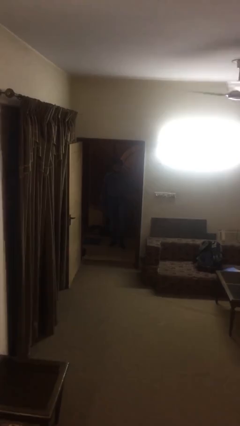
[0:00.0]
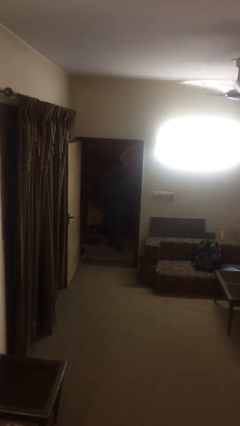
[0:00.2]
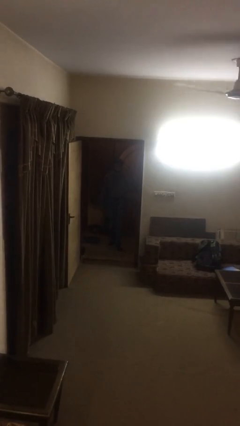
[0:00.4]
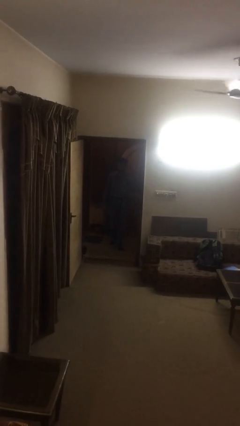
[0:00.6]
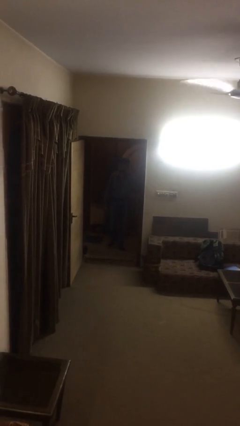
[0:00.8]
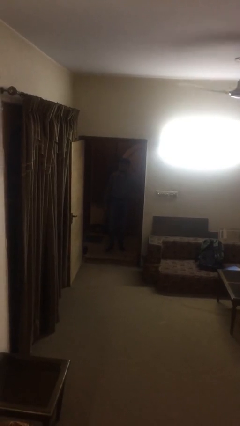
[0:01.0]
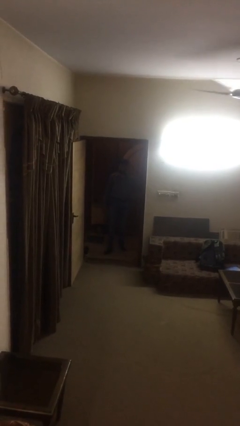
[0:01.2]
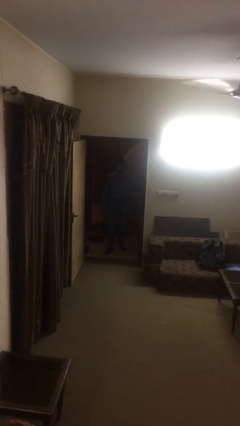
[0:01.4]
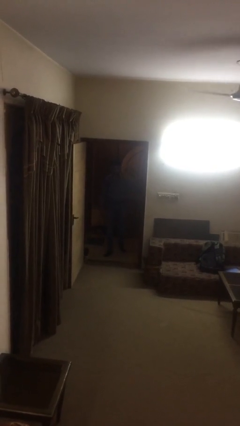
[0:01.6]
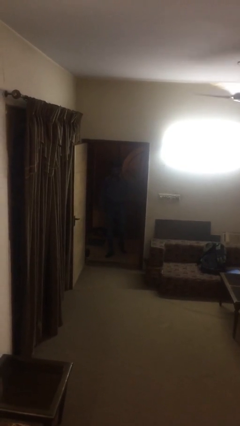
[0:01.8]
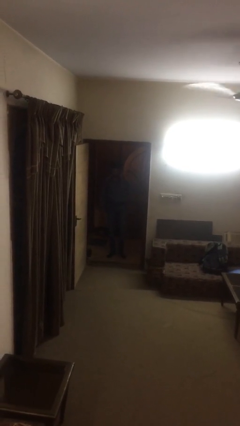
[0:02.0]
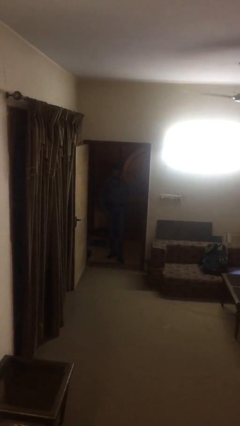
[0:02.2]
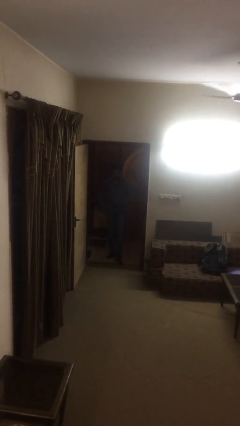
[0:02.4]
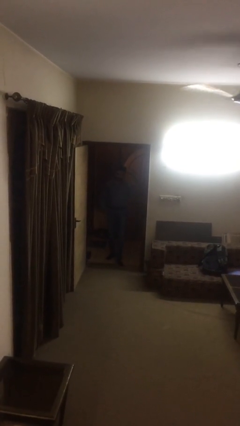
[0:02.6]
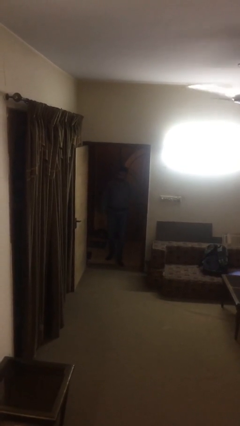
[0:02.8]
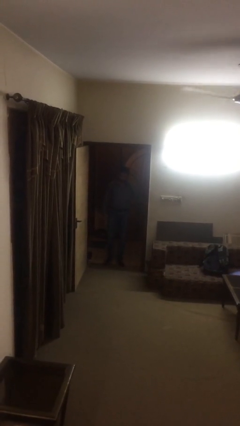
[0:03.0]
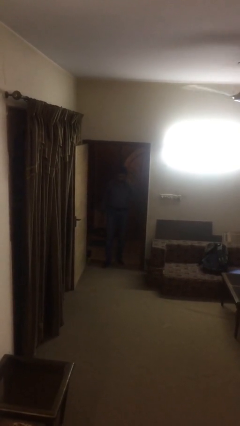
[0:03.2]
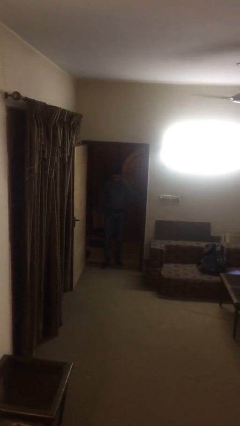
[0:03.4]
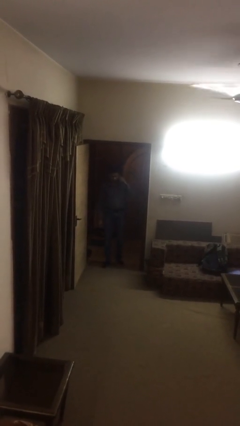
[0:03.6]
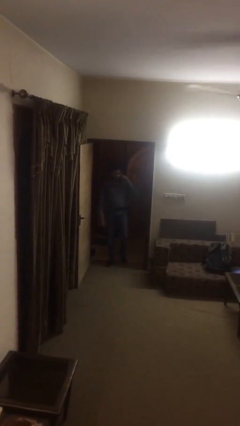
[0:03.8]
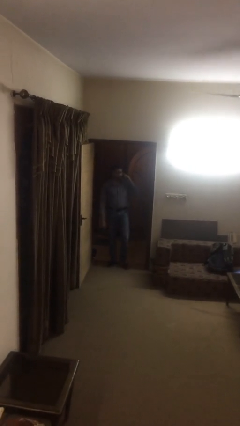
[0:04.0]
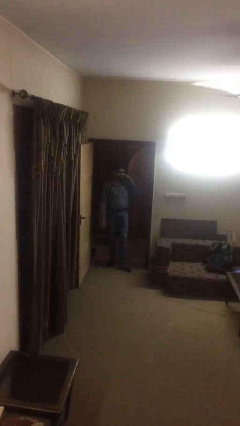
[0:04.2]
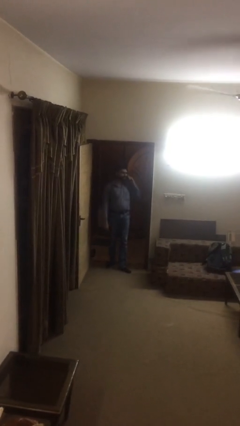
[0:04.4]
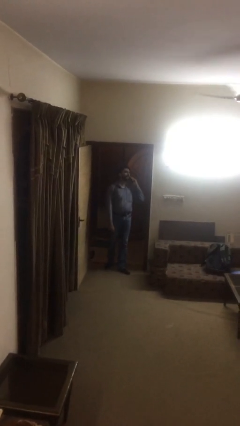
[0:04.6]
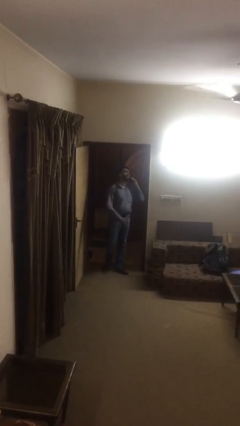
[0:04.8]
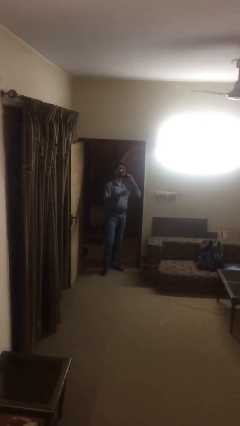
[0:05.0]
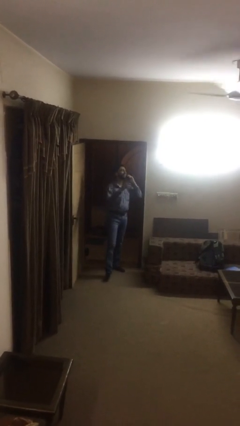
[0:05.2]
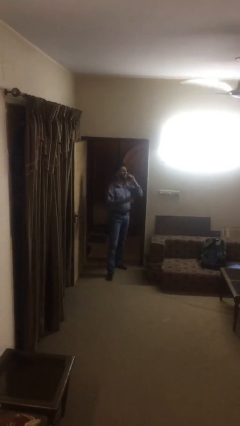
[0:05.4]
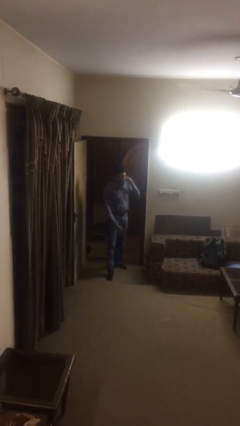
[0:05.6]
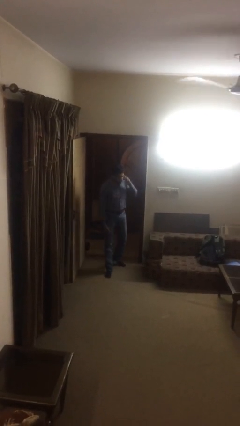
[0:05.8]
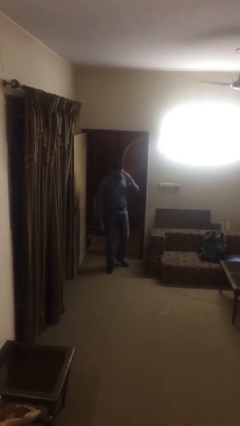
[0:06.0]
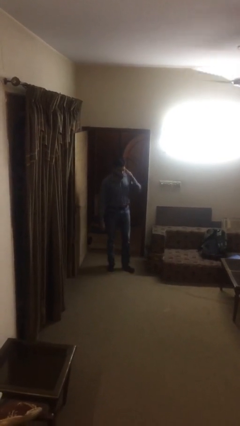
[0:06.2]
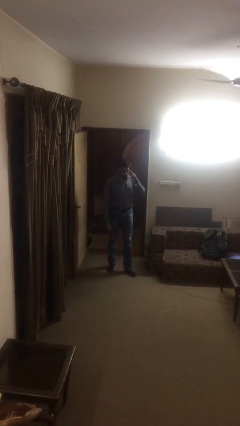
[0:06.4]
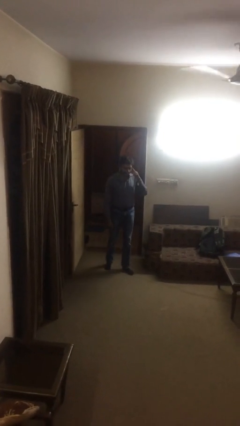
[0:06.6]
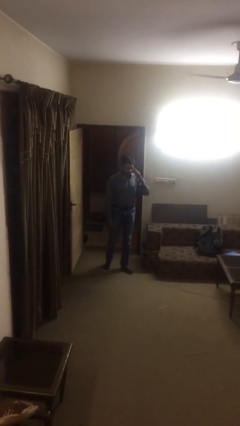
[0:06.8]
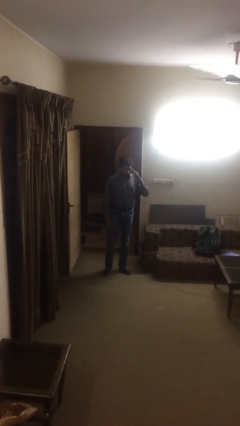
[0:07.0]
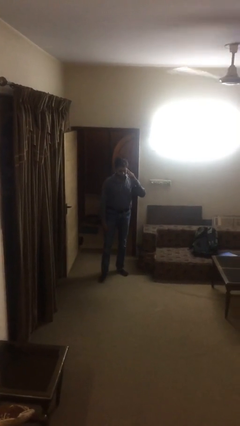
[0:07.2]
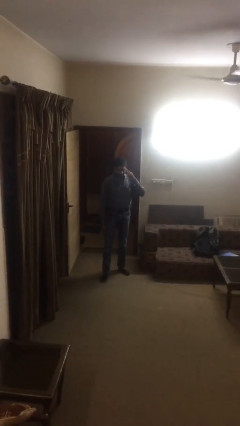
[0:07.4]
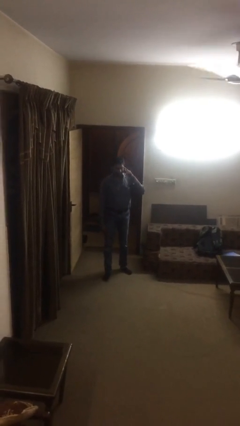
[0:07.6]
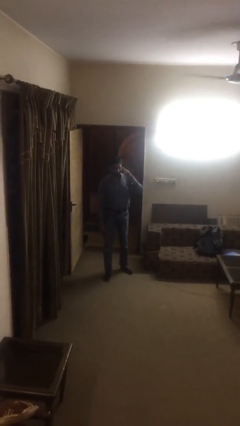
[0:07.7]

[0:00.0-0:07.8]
person enters scene through structure

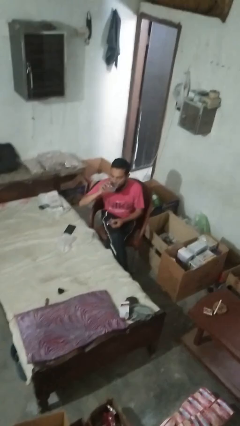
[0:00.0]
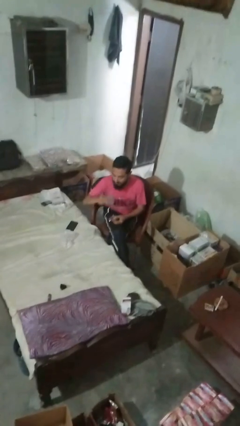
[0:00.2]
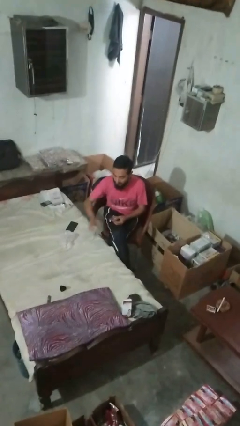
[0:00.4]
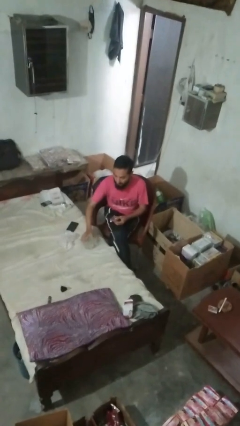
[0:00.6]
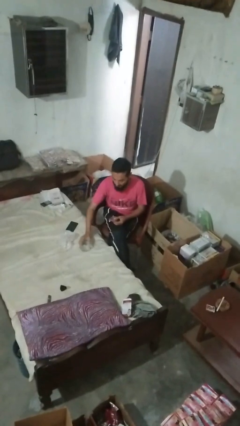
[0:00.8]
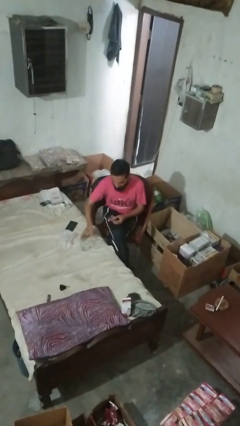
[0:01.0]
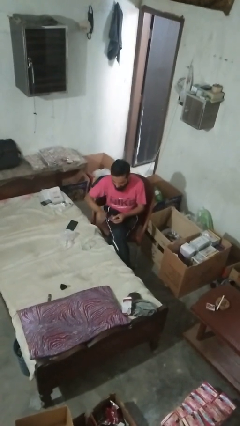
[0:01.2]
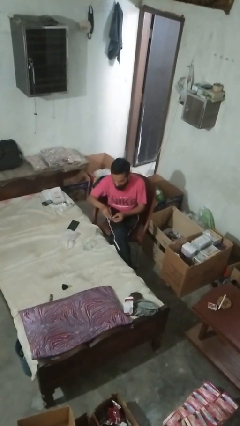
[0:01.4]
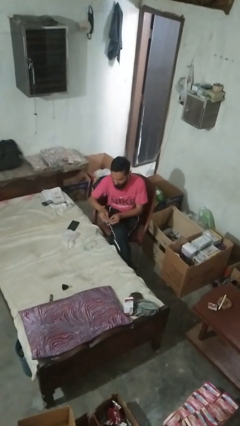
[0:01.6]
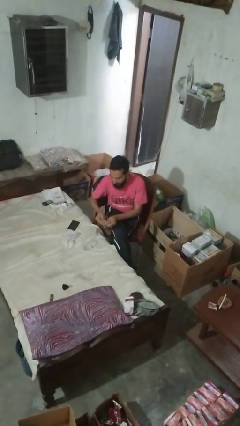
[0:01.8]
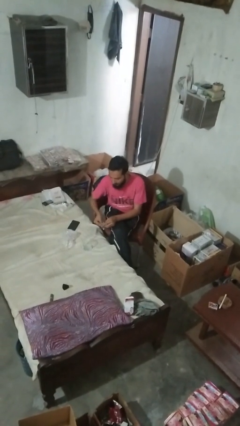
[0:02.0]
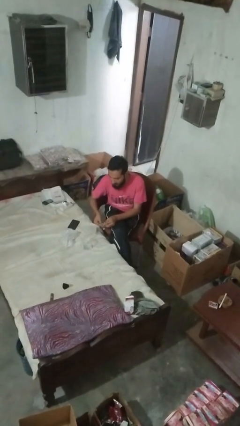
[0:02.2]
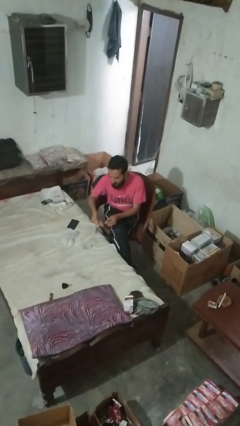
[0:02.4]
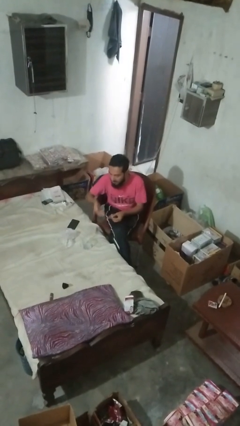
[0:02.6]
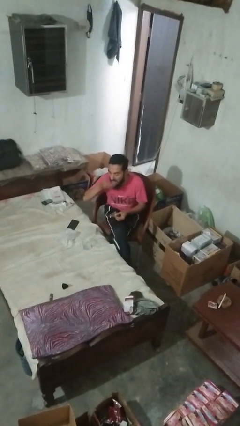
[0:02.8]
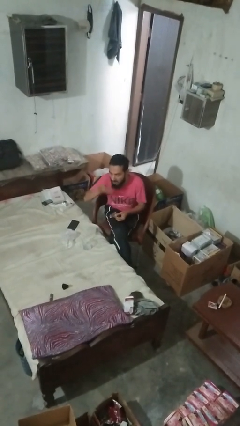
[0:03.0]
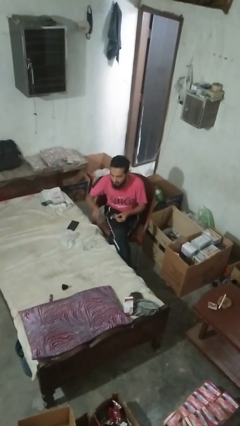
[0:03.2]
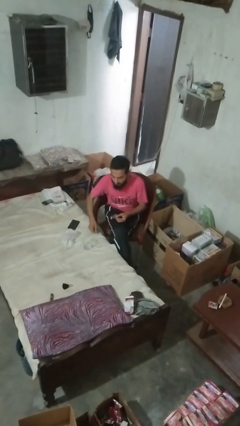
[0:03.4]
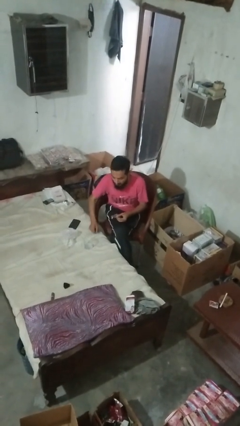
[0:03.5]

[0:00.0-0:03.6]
person takes medicine pills

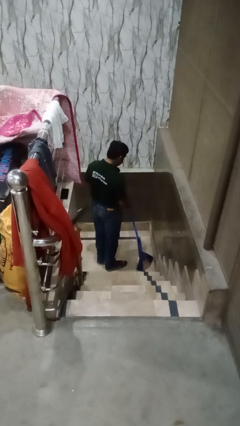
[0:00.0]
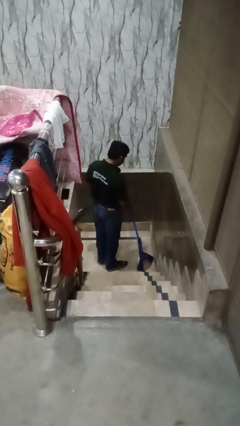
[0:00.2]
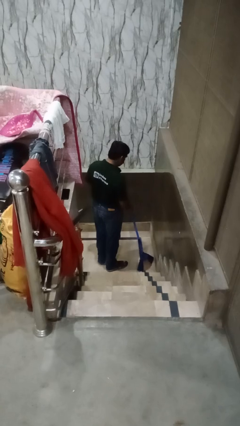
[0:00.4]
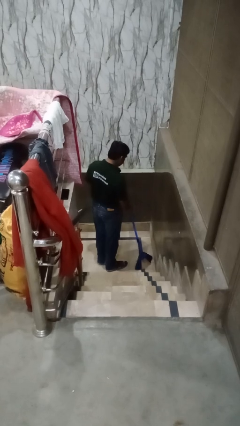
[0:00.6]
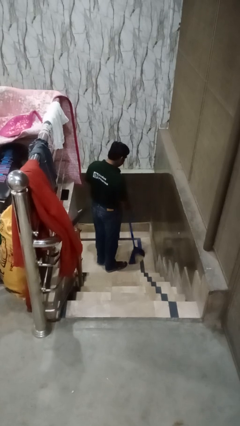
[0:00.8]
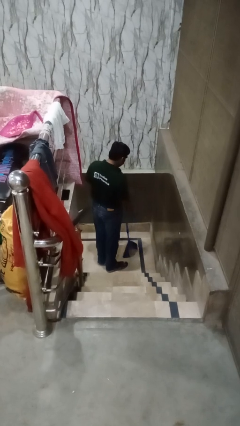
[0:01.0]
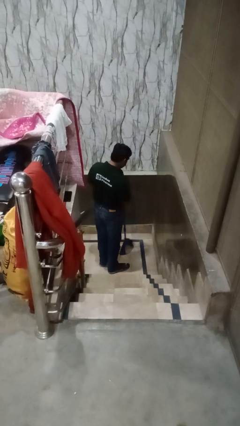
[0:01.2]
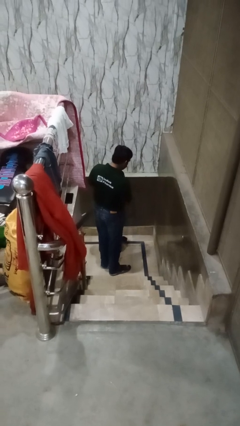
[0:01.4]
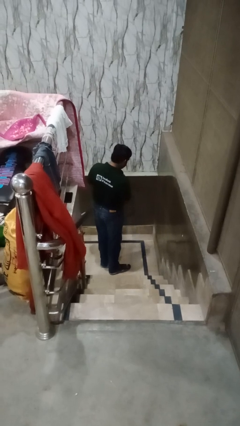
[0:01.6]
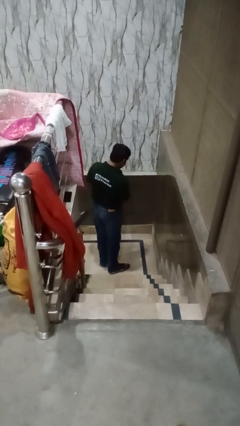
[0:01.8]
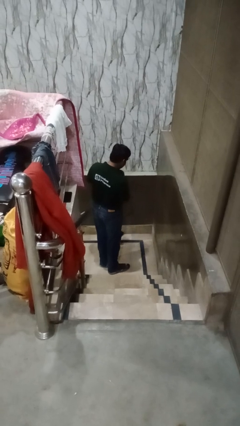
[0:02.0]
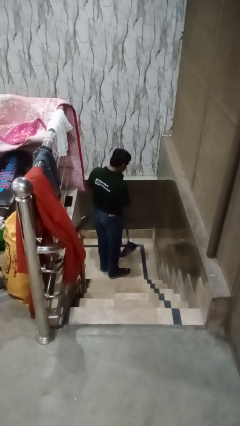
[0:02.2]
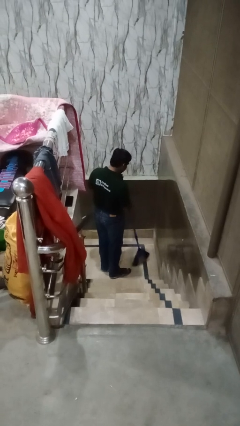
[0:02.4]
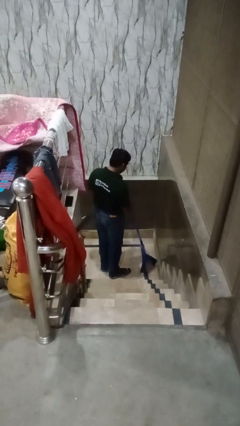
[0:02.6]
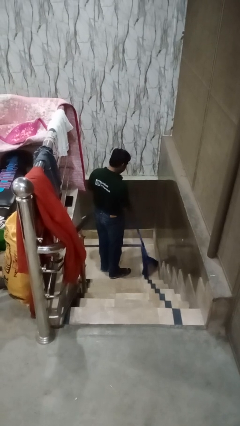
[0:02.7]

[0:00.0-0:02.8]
person sweeps floor

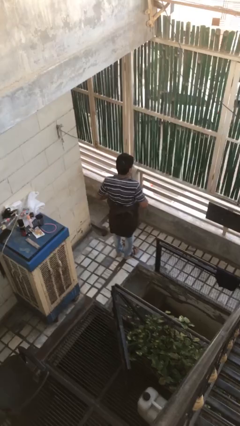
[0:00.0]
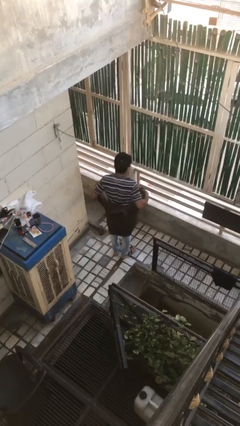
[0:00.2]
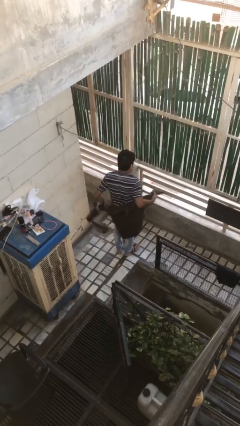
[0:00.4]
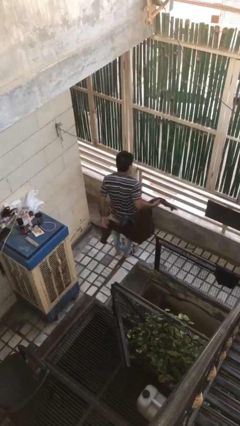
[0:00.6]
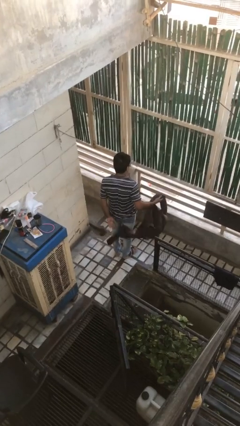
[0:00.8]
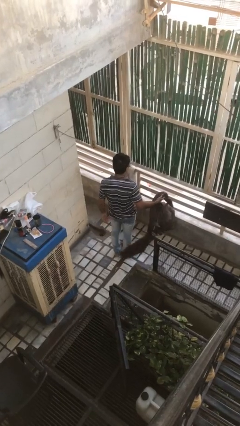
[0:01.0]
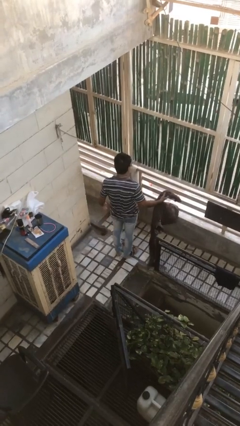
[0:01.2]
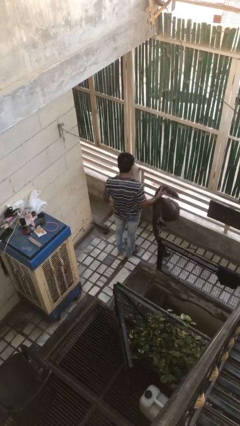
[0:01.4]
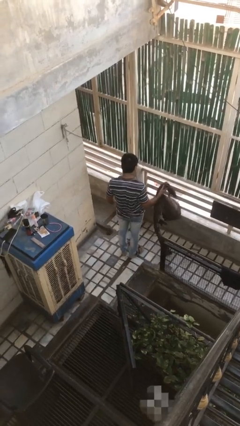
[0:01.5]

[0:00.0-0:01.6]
person unties jacket around waist

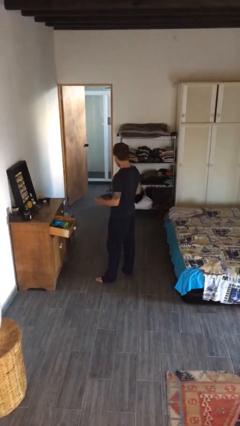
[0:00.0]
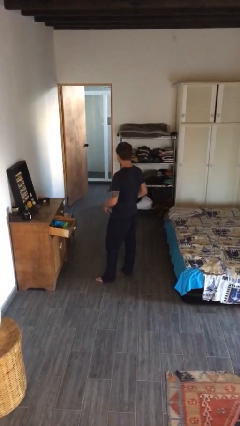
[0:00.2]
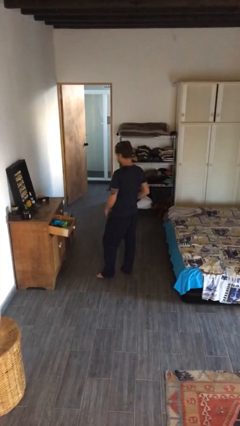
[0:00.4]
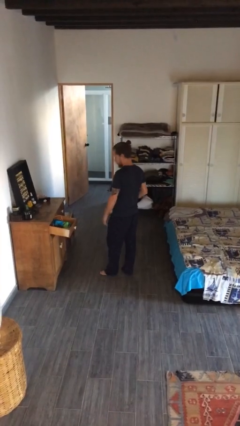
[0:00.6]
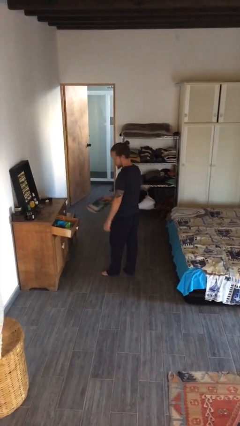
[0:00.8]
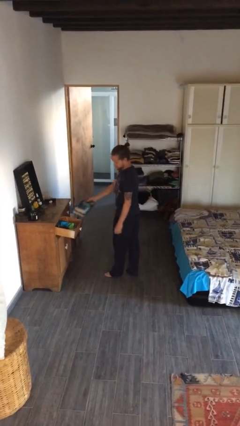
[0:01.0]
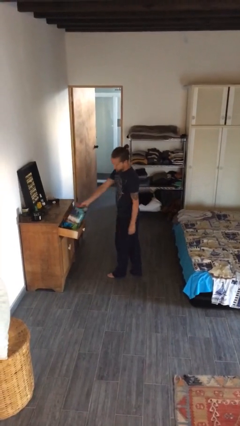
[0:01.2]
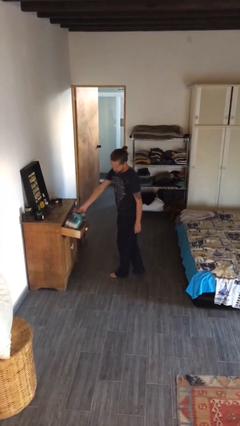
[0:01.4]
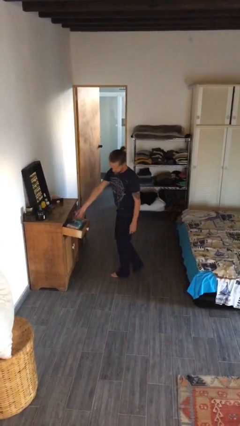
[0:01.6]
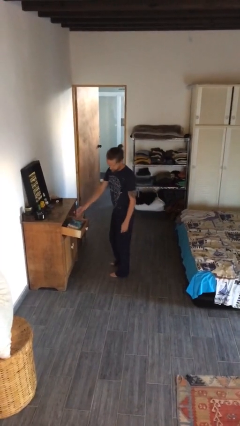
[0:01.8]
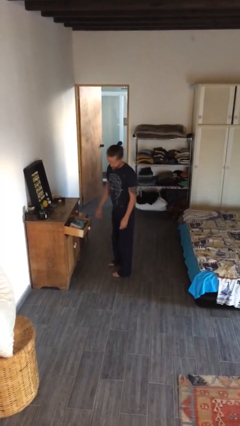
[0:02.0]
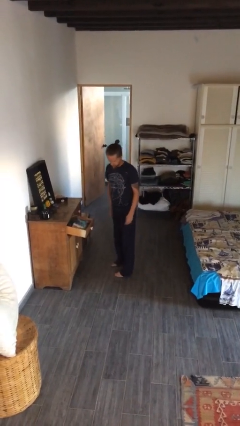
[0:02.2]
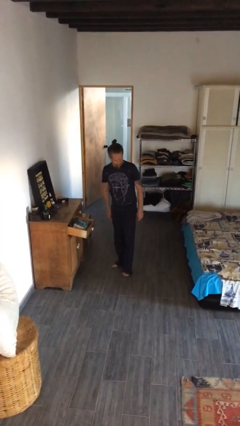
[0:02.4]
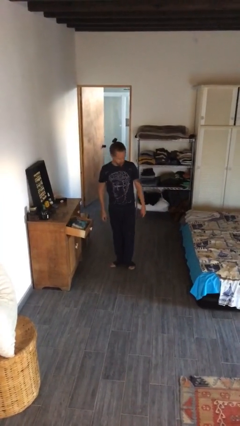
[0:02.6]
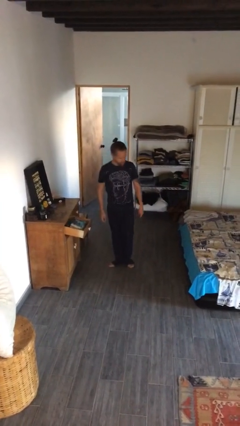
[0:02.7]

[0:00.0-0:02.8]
person puts down object into cabinet
